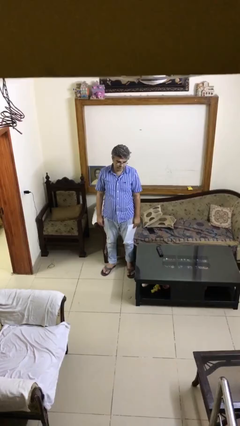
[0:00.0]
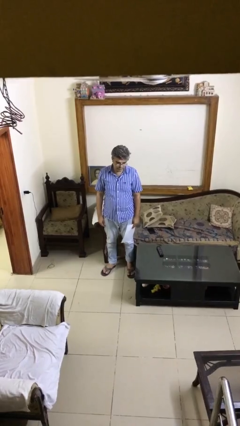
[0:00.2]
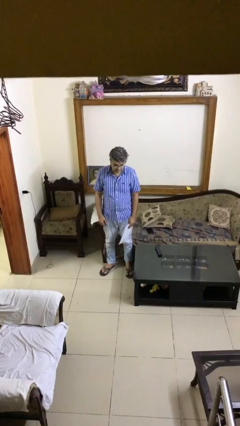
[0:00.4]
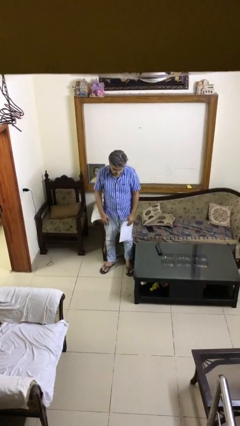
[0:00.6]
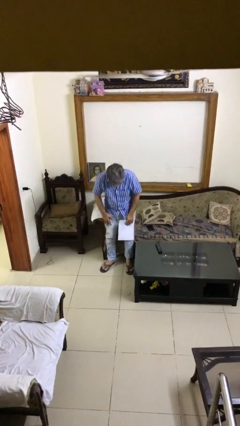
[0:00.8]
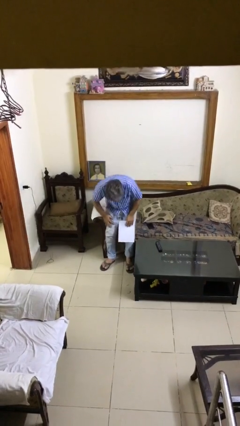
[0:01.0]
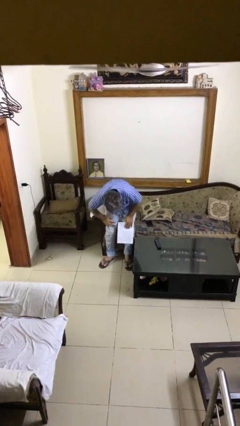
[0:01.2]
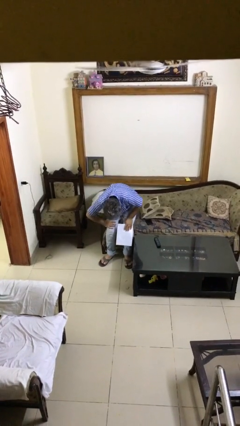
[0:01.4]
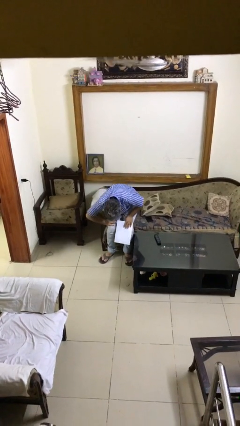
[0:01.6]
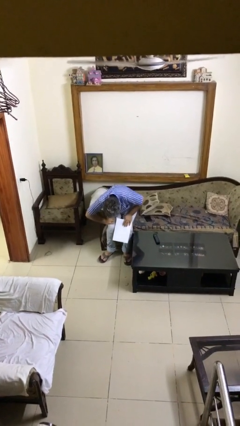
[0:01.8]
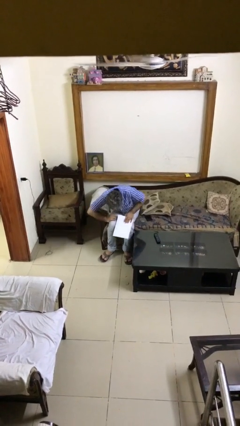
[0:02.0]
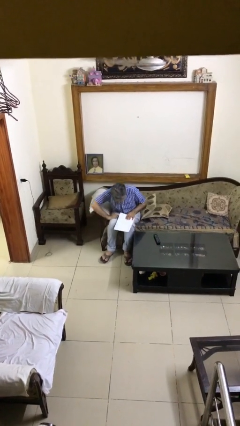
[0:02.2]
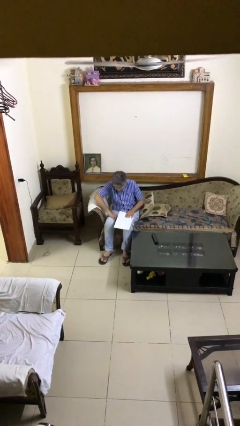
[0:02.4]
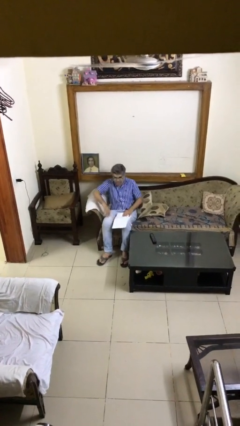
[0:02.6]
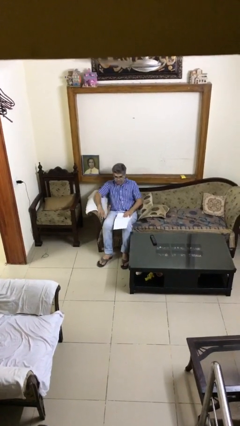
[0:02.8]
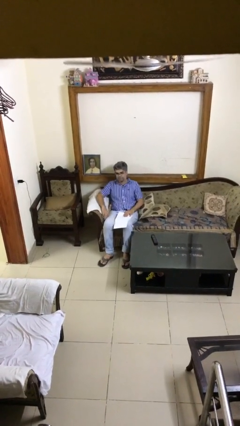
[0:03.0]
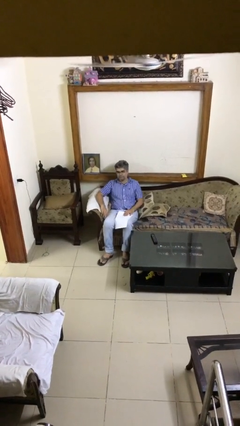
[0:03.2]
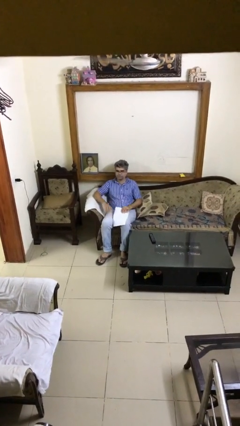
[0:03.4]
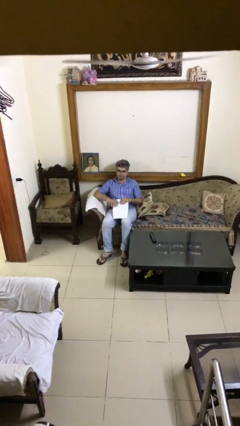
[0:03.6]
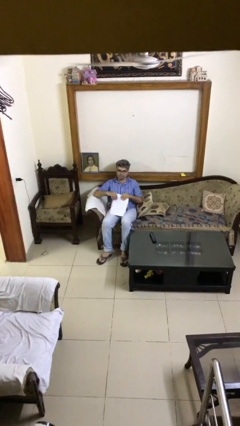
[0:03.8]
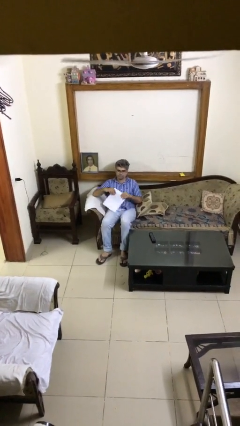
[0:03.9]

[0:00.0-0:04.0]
person sits down

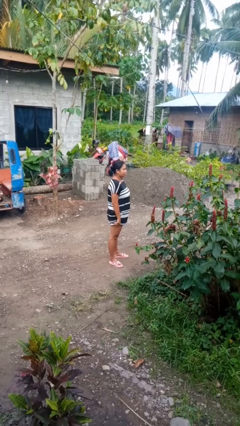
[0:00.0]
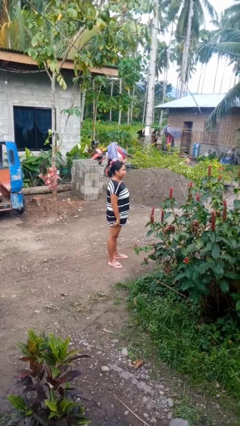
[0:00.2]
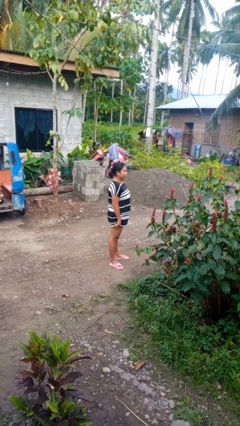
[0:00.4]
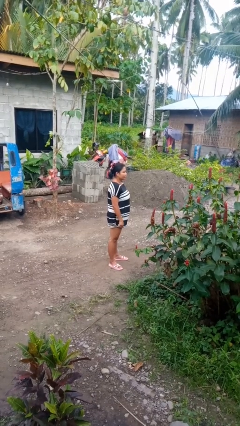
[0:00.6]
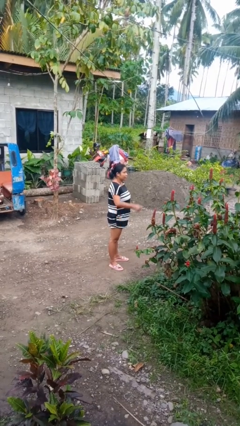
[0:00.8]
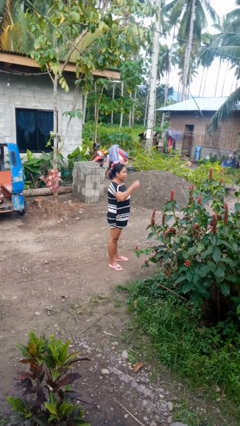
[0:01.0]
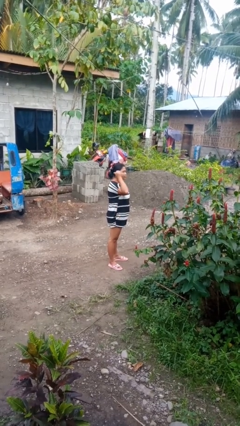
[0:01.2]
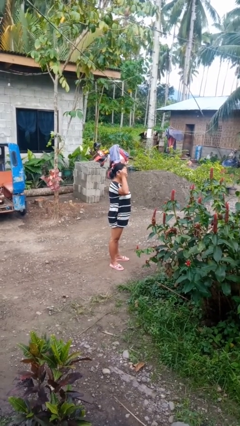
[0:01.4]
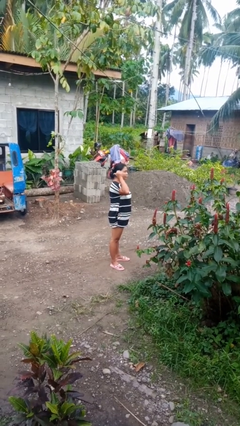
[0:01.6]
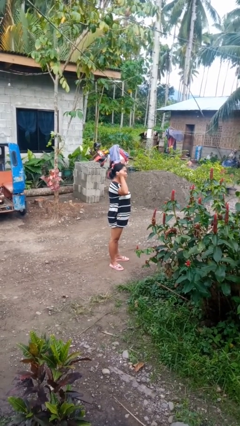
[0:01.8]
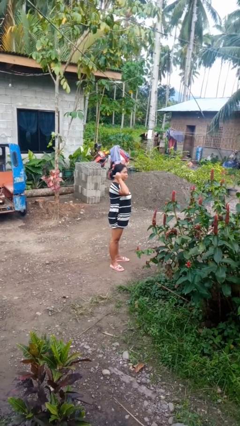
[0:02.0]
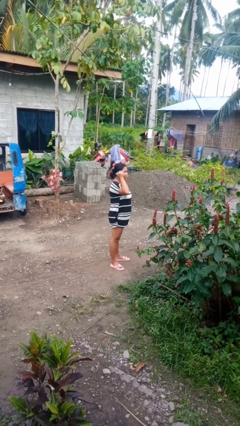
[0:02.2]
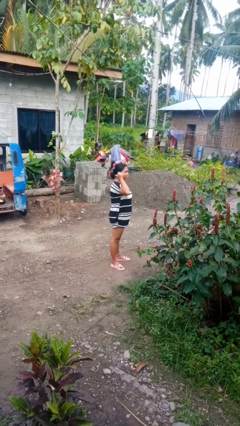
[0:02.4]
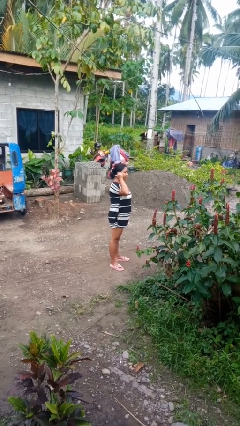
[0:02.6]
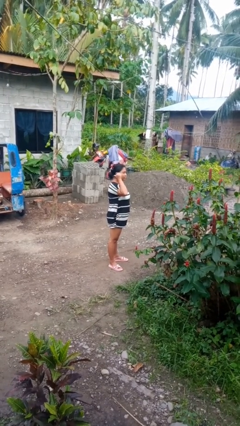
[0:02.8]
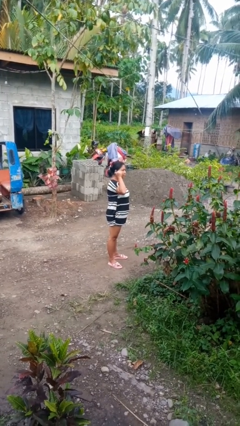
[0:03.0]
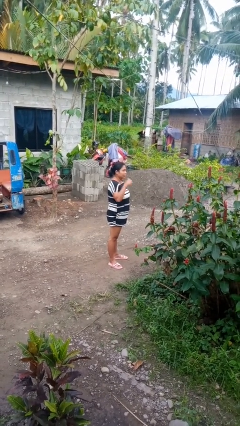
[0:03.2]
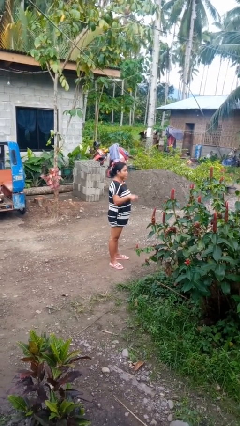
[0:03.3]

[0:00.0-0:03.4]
person gestures behind me

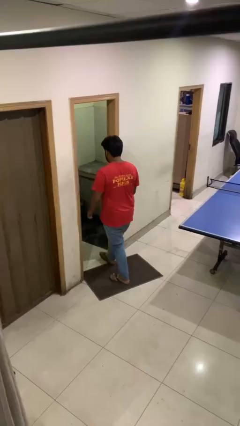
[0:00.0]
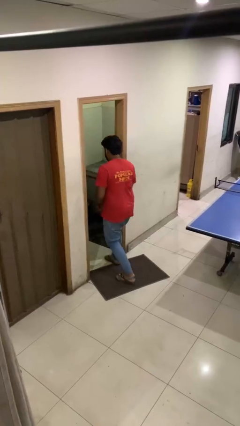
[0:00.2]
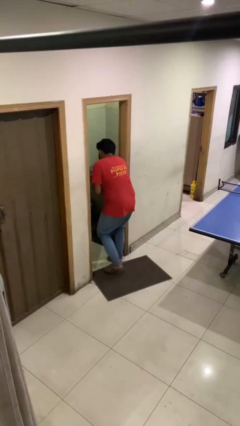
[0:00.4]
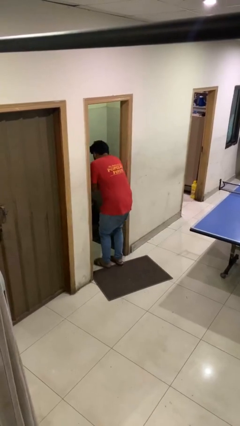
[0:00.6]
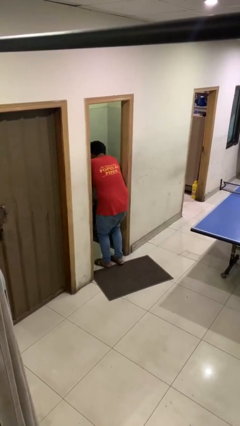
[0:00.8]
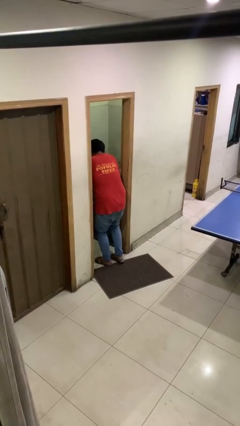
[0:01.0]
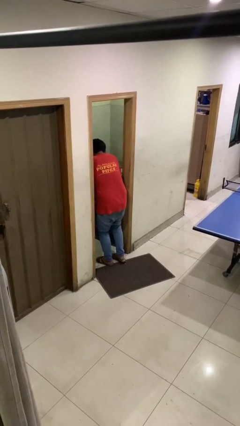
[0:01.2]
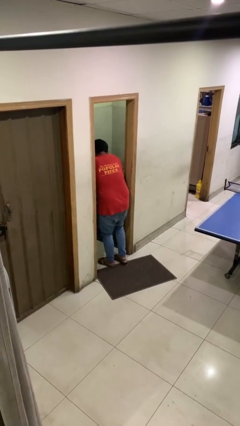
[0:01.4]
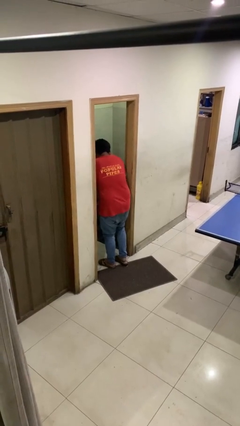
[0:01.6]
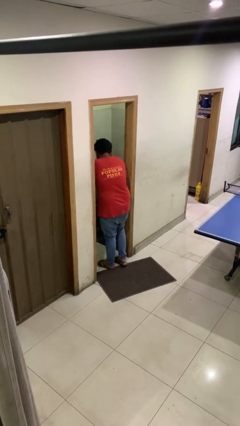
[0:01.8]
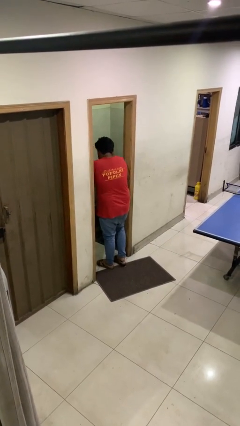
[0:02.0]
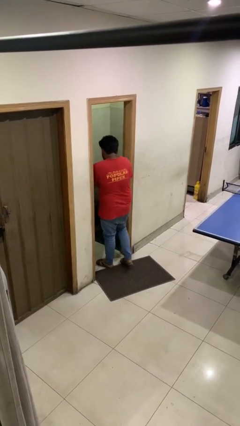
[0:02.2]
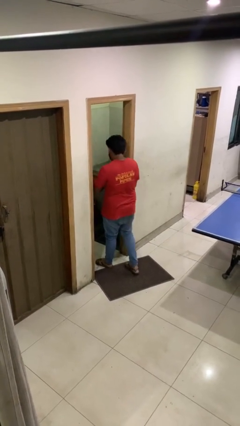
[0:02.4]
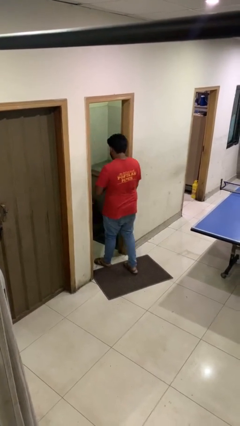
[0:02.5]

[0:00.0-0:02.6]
person bumps into wall

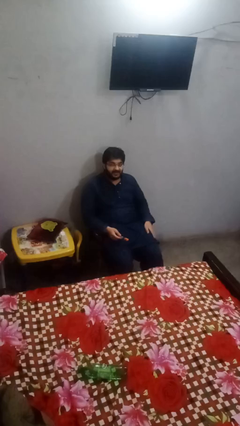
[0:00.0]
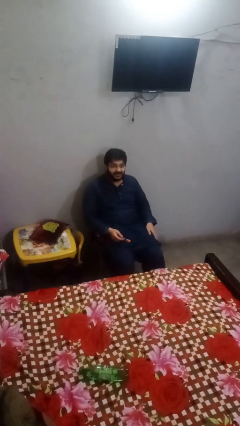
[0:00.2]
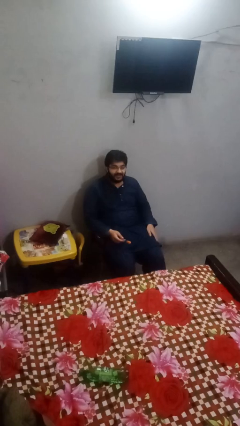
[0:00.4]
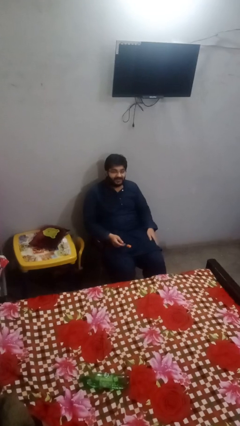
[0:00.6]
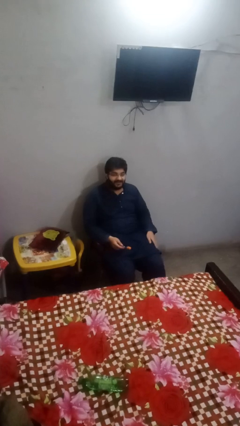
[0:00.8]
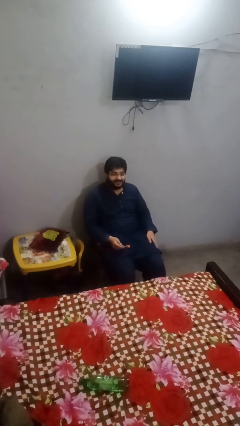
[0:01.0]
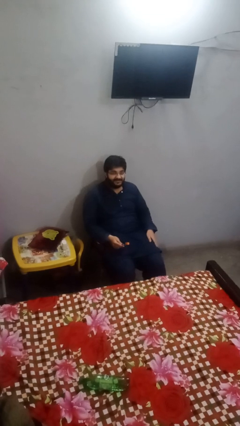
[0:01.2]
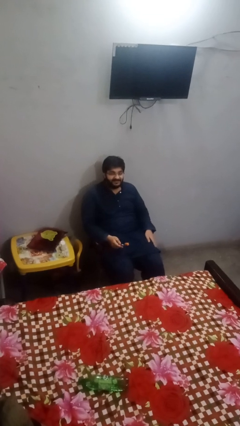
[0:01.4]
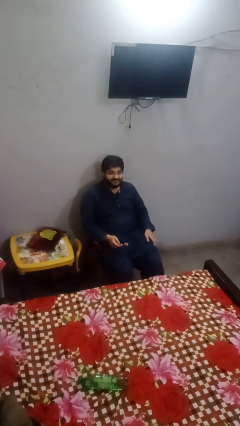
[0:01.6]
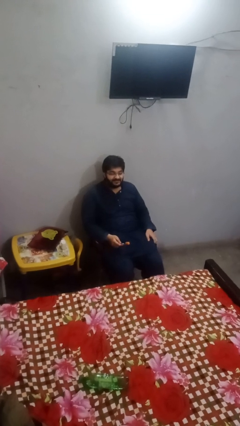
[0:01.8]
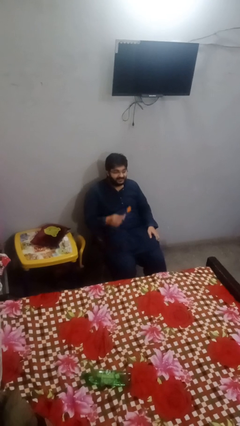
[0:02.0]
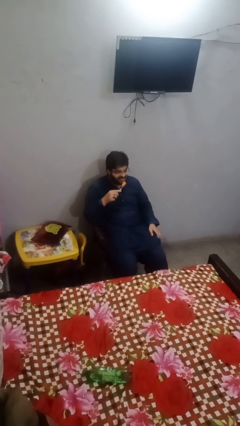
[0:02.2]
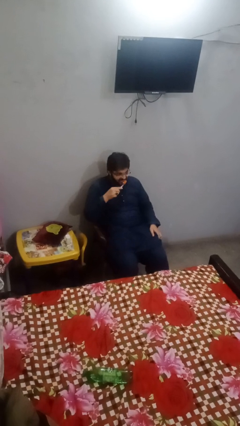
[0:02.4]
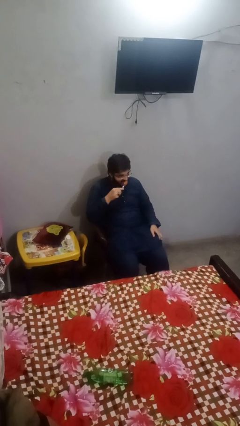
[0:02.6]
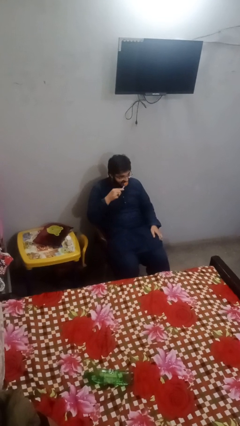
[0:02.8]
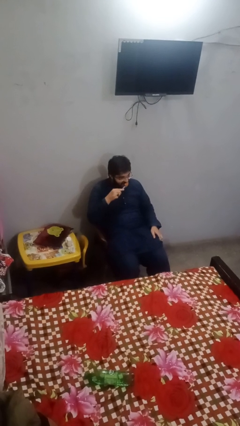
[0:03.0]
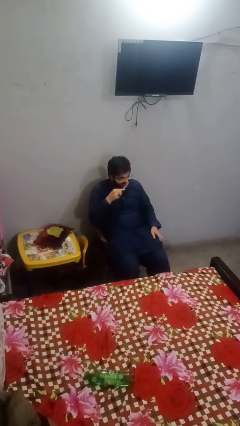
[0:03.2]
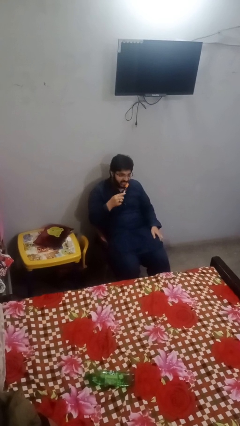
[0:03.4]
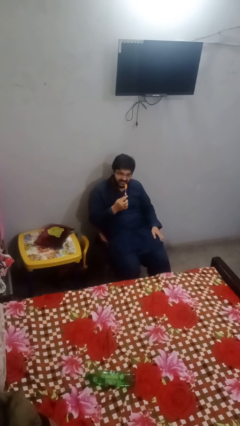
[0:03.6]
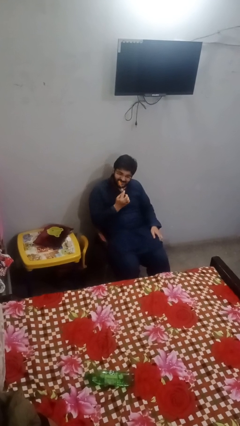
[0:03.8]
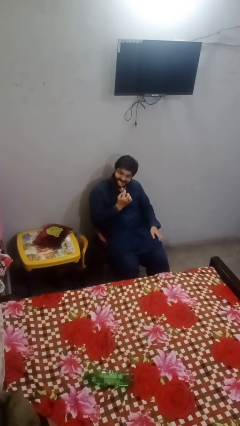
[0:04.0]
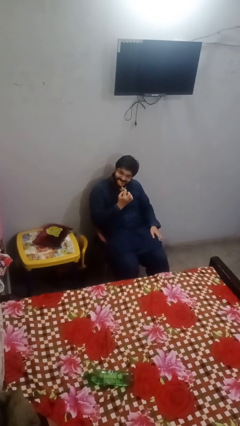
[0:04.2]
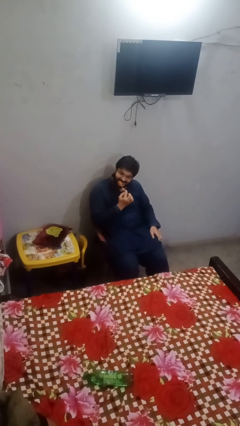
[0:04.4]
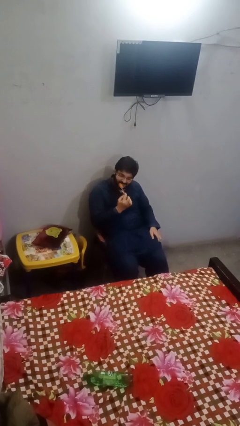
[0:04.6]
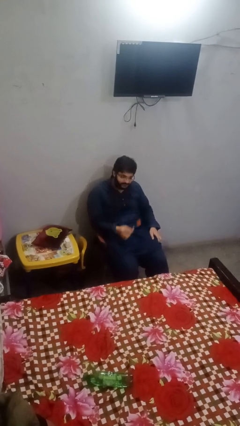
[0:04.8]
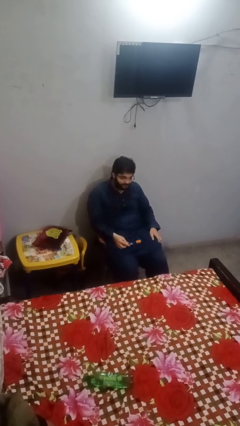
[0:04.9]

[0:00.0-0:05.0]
person brushes teeth

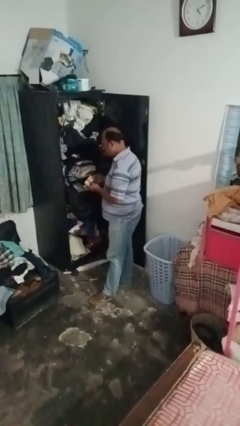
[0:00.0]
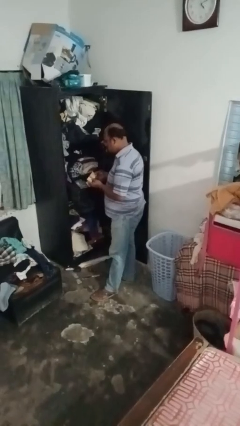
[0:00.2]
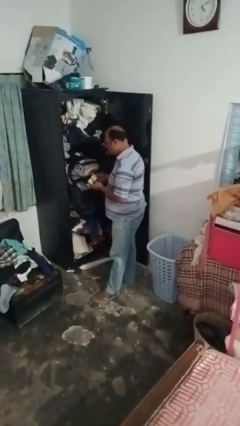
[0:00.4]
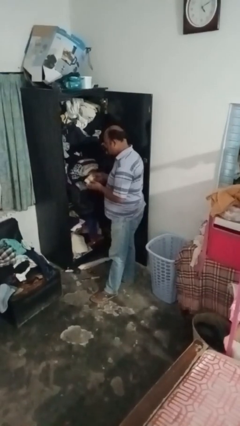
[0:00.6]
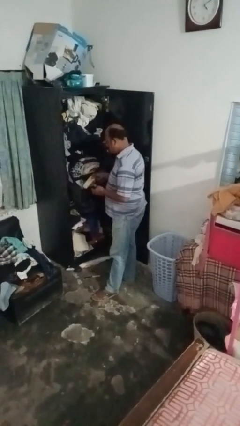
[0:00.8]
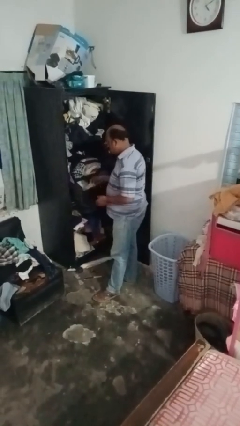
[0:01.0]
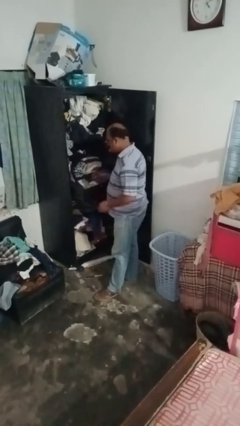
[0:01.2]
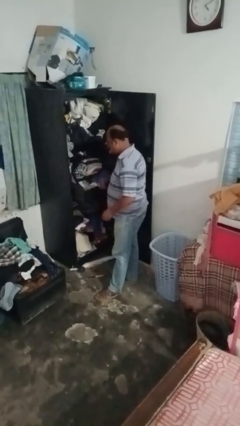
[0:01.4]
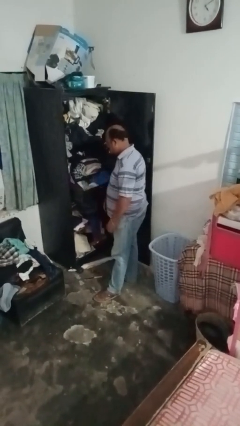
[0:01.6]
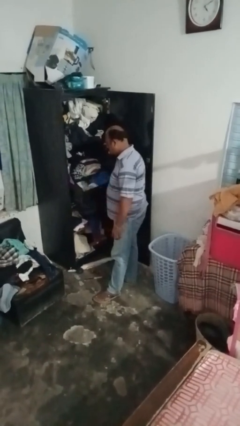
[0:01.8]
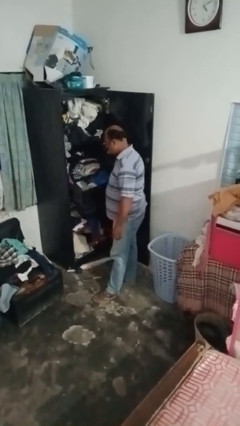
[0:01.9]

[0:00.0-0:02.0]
person takes clothes from dresser
